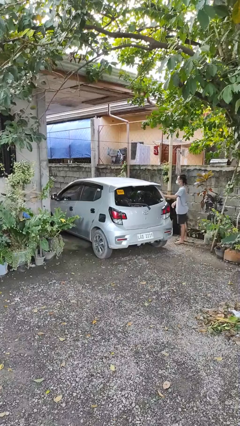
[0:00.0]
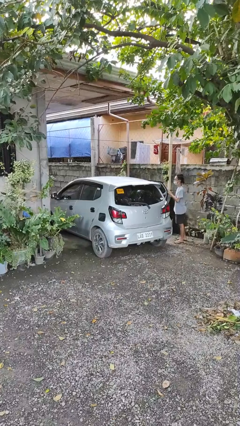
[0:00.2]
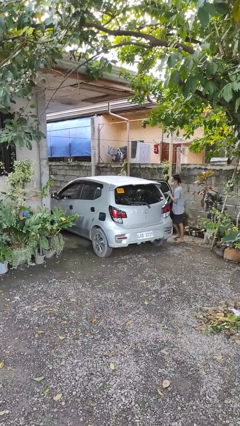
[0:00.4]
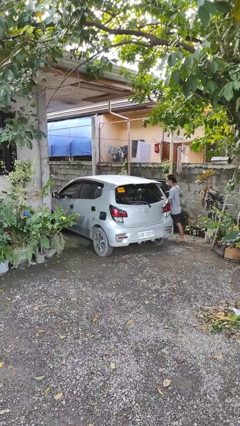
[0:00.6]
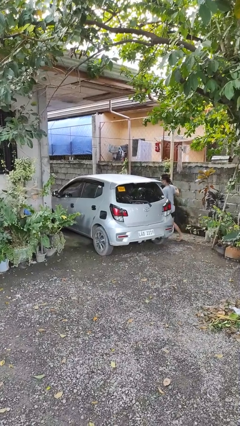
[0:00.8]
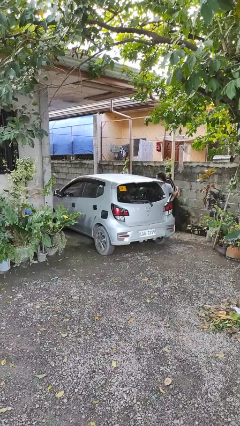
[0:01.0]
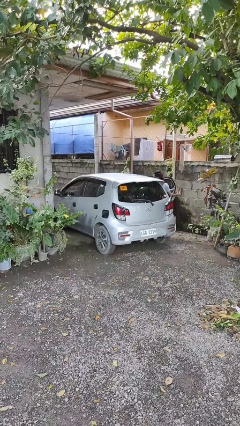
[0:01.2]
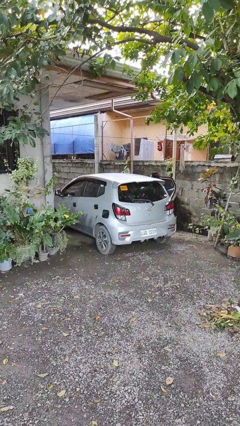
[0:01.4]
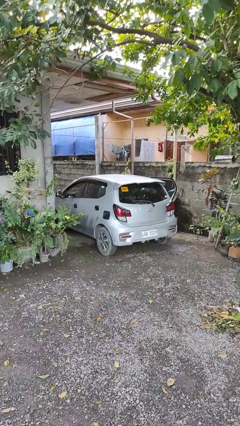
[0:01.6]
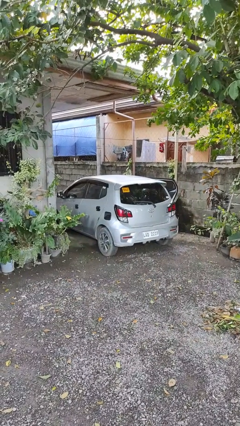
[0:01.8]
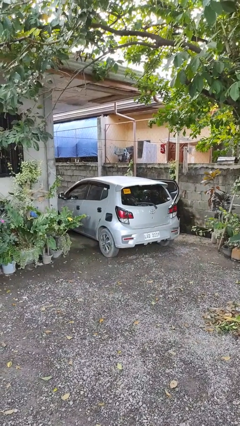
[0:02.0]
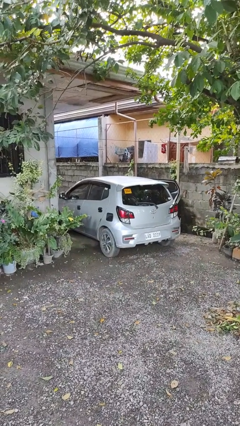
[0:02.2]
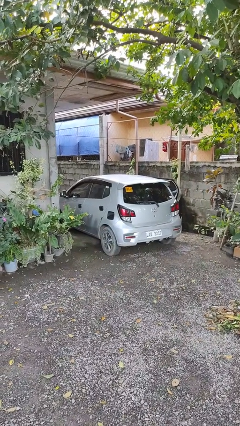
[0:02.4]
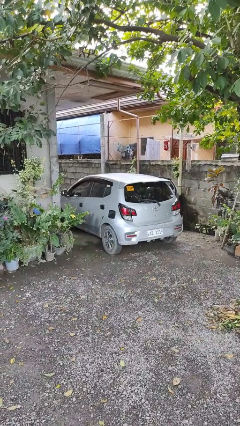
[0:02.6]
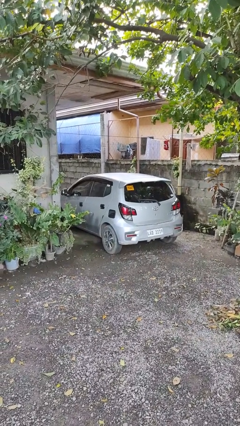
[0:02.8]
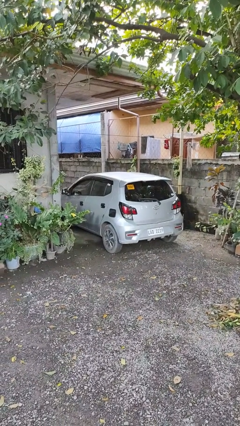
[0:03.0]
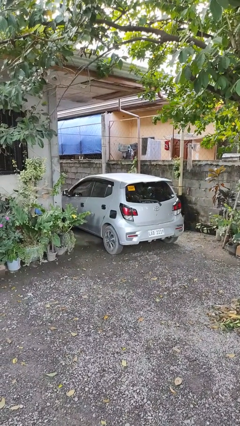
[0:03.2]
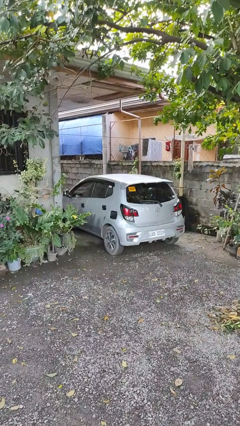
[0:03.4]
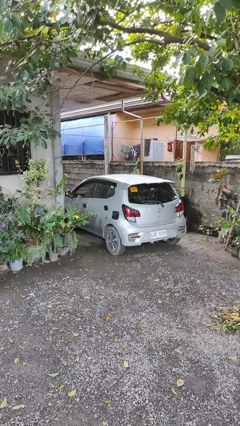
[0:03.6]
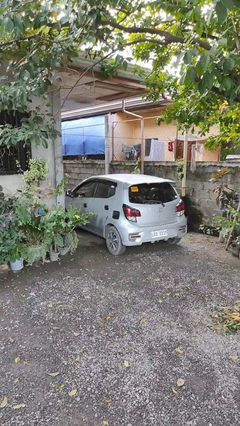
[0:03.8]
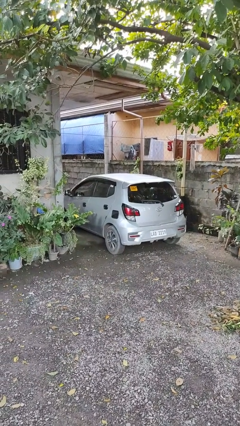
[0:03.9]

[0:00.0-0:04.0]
car picks up person

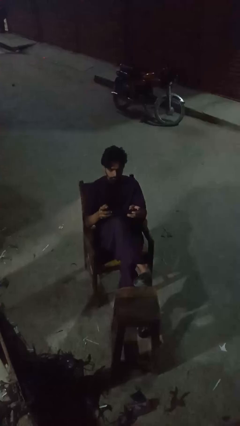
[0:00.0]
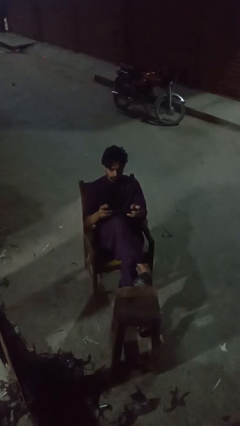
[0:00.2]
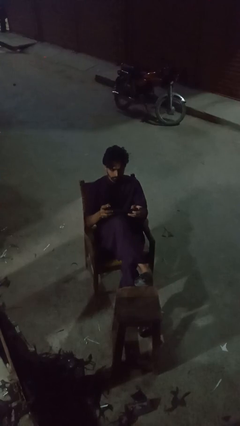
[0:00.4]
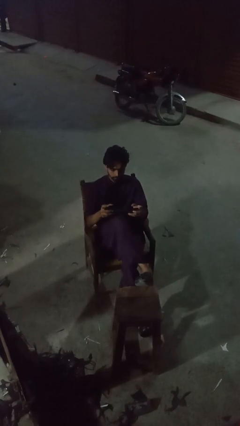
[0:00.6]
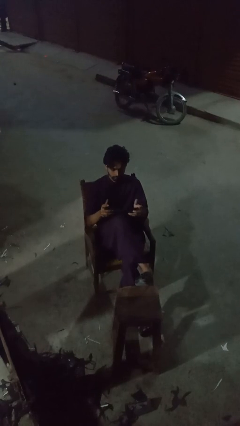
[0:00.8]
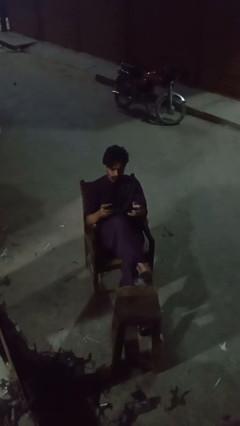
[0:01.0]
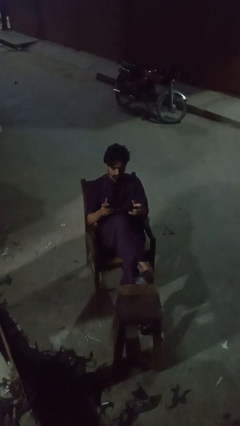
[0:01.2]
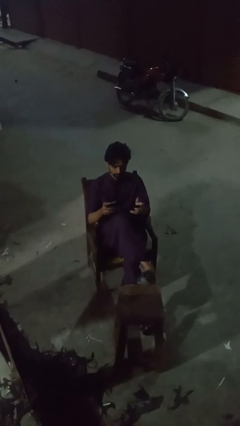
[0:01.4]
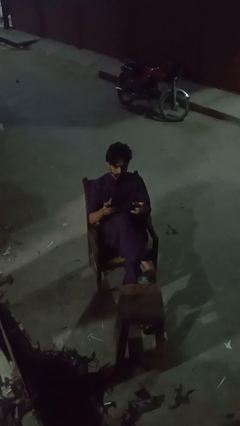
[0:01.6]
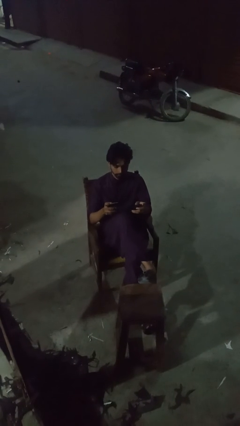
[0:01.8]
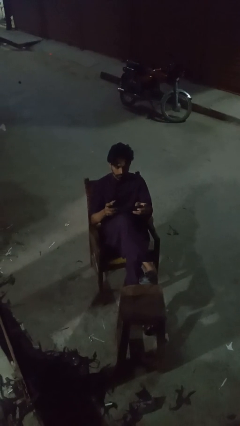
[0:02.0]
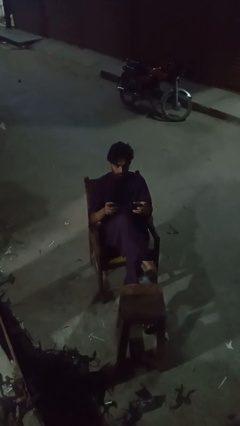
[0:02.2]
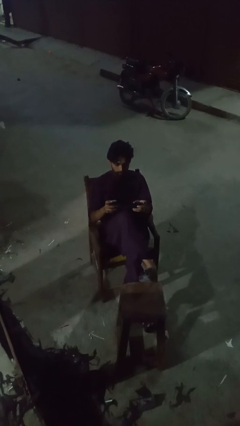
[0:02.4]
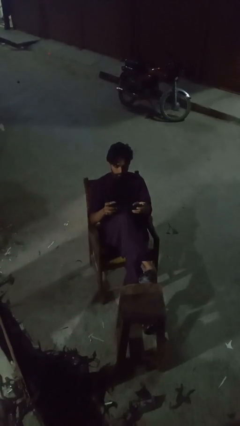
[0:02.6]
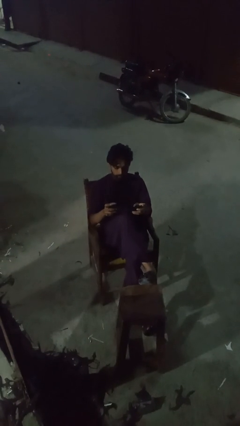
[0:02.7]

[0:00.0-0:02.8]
person interacts with handheld game

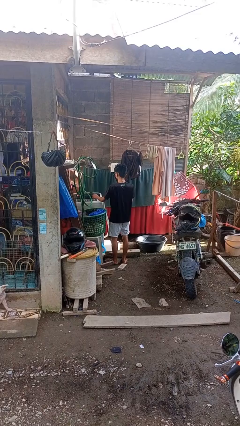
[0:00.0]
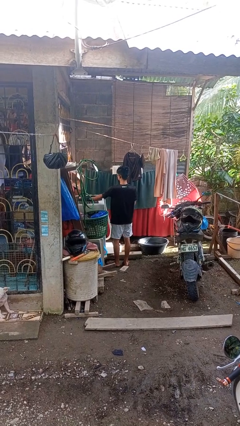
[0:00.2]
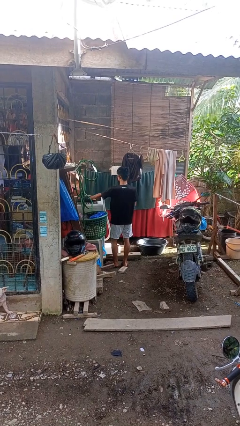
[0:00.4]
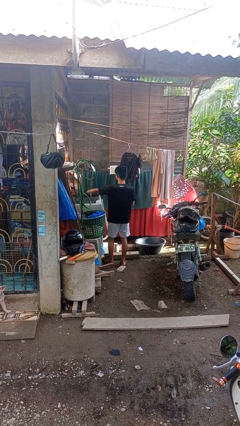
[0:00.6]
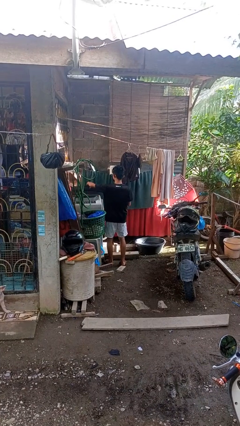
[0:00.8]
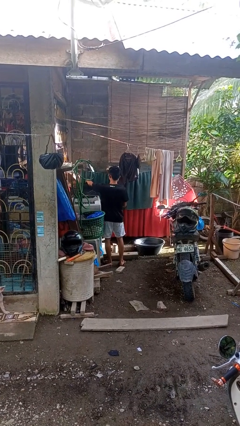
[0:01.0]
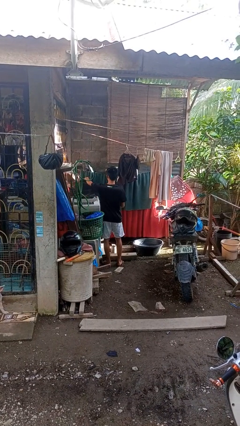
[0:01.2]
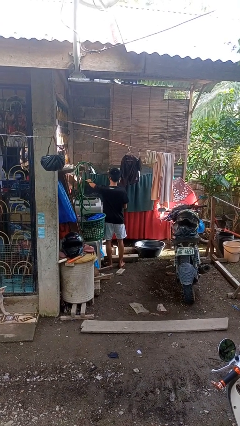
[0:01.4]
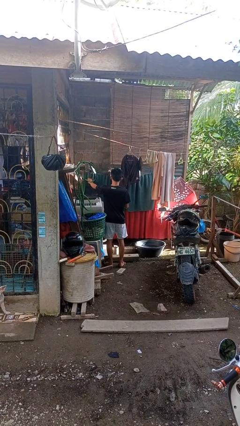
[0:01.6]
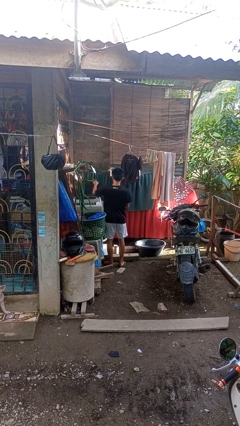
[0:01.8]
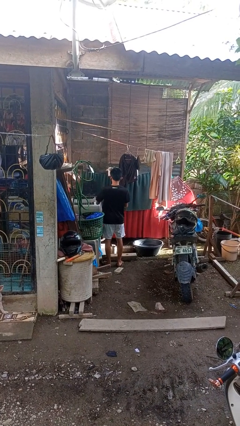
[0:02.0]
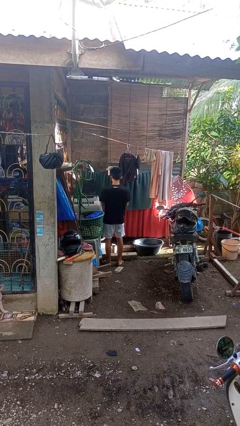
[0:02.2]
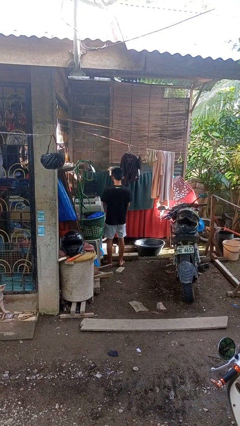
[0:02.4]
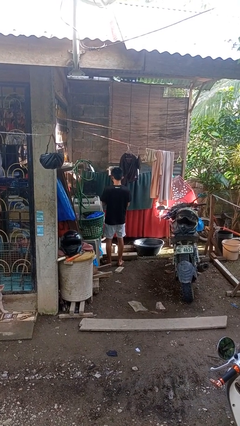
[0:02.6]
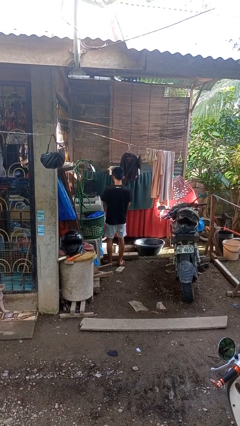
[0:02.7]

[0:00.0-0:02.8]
person opens clothes washer

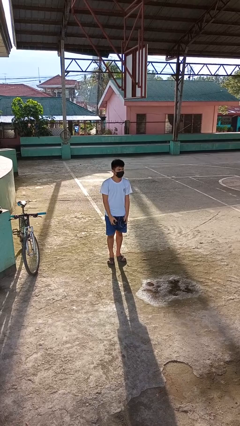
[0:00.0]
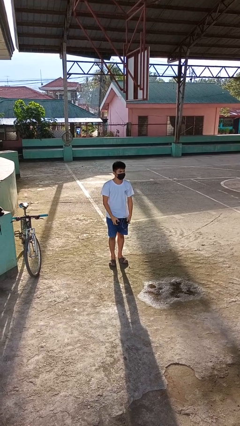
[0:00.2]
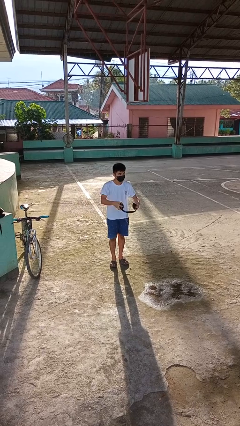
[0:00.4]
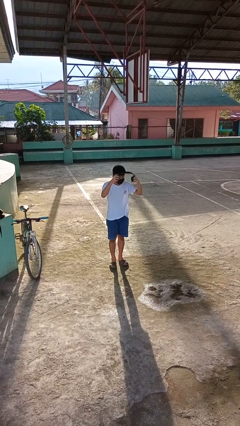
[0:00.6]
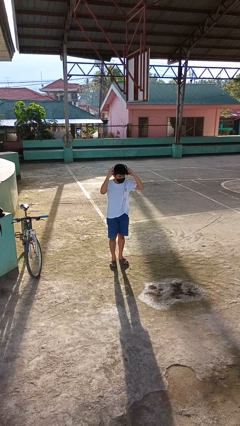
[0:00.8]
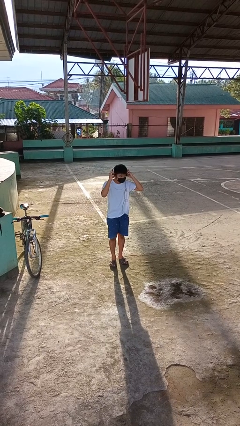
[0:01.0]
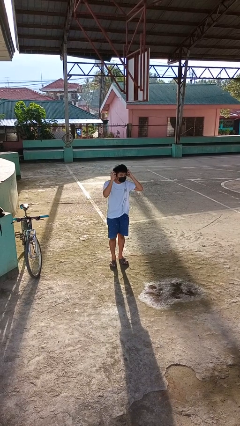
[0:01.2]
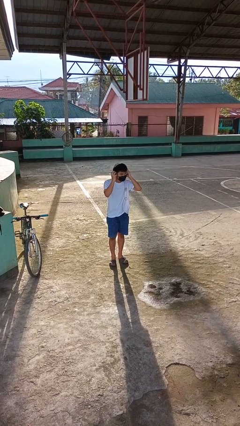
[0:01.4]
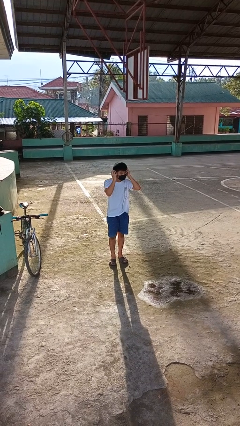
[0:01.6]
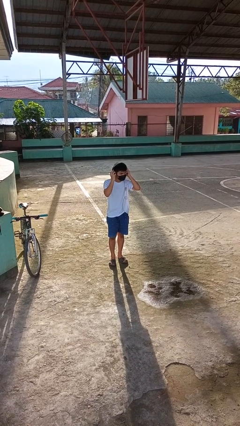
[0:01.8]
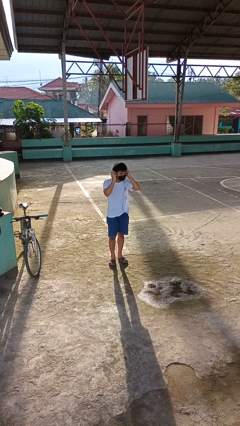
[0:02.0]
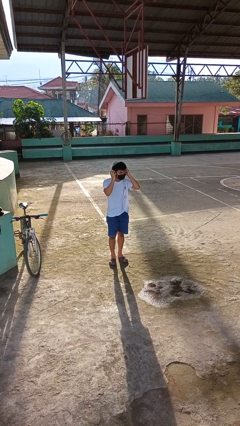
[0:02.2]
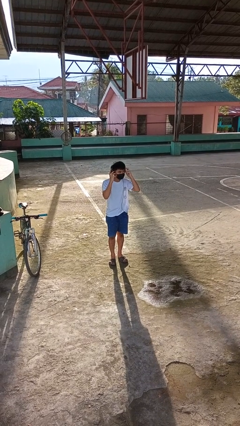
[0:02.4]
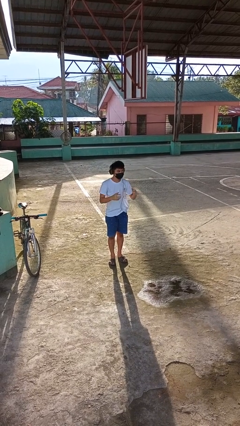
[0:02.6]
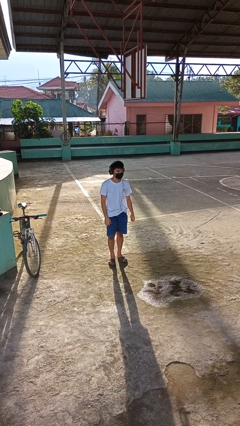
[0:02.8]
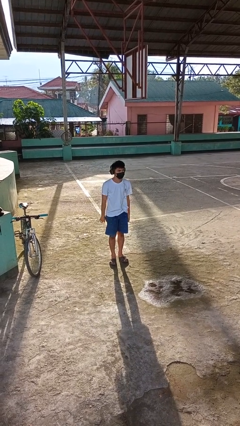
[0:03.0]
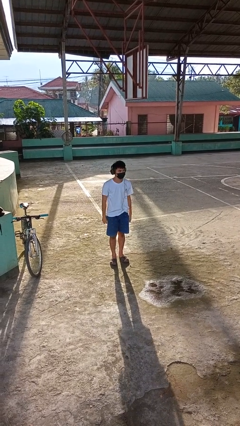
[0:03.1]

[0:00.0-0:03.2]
person puts on headphones

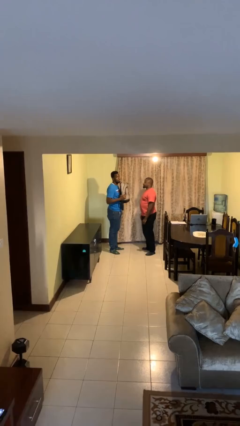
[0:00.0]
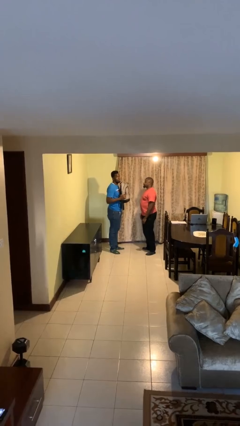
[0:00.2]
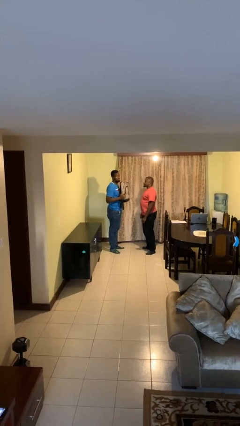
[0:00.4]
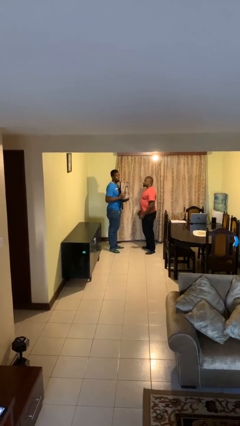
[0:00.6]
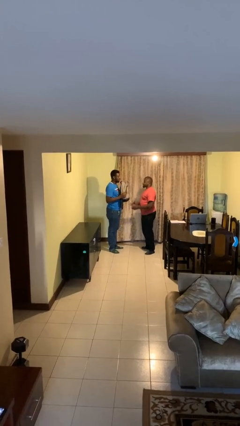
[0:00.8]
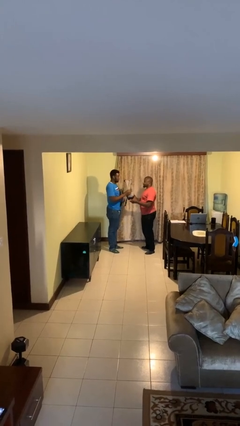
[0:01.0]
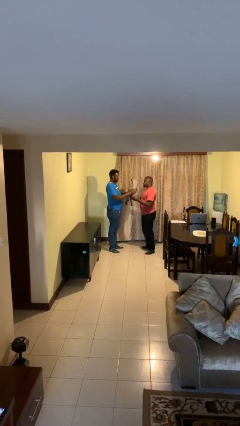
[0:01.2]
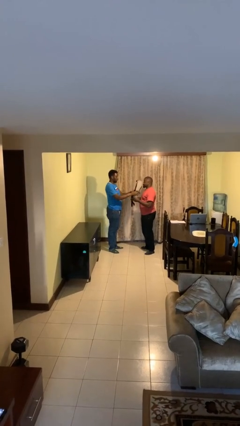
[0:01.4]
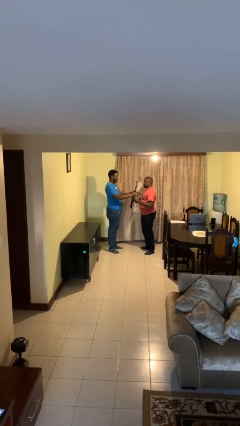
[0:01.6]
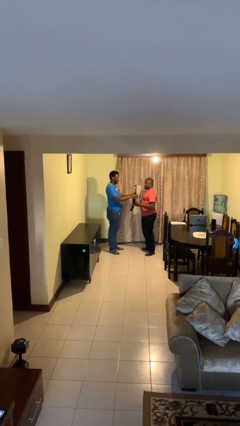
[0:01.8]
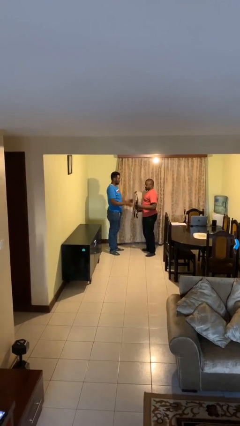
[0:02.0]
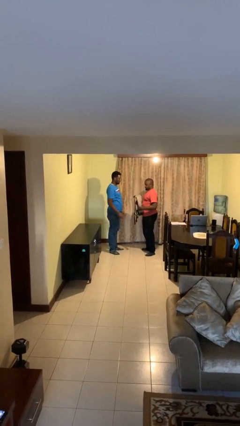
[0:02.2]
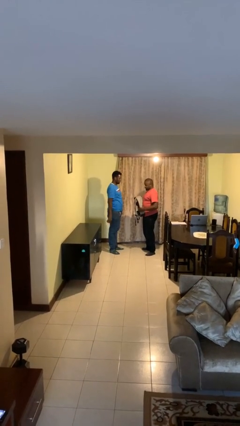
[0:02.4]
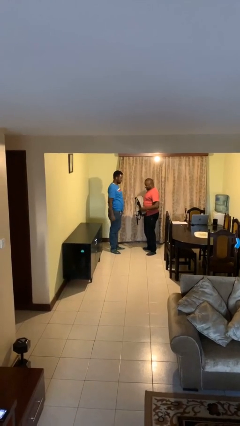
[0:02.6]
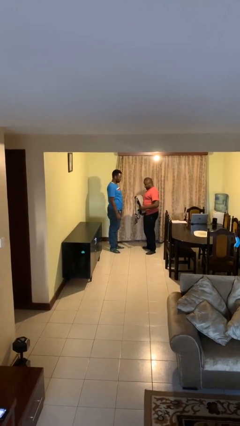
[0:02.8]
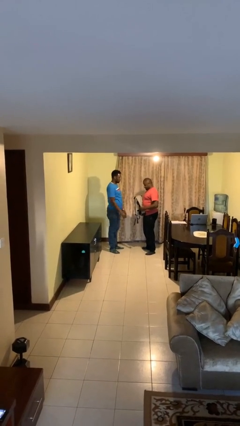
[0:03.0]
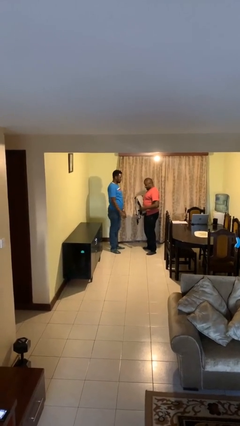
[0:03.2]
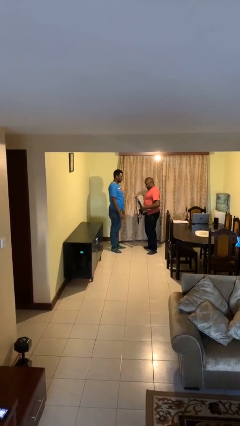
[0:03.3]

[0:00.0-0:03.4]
person transfers object to person

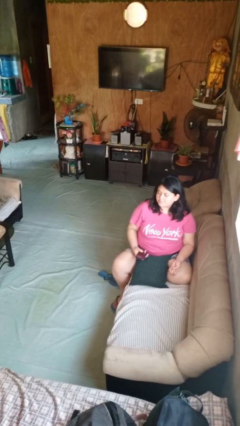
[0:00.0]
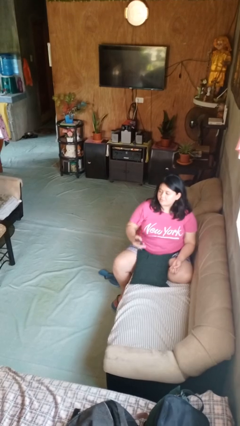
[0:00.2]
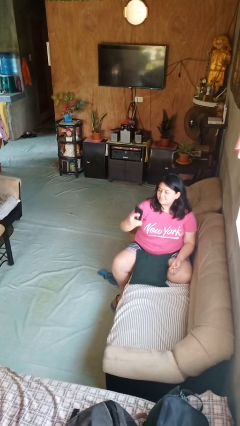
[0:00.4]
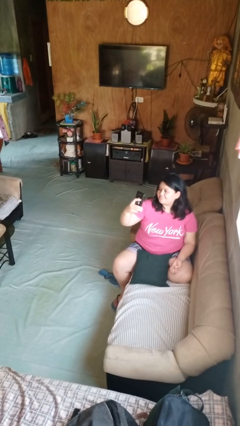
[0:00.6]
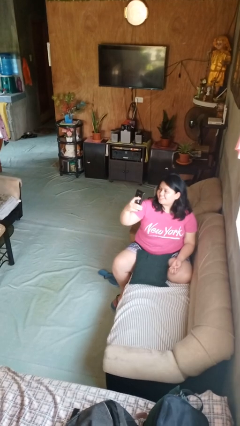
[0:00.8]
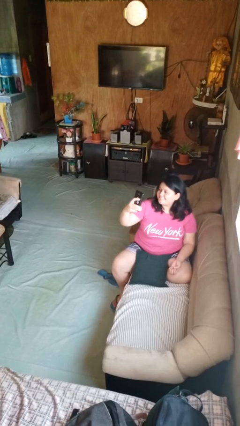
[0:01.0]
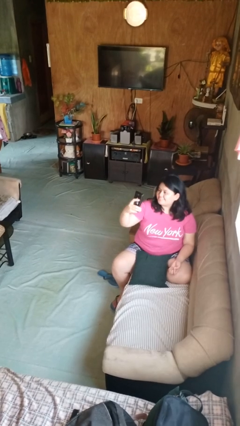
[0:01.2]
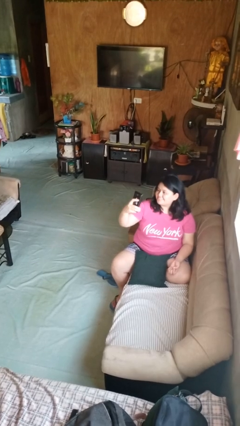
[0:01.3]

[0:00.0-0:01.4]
person takes selfie
